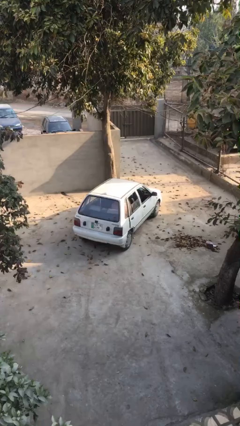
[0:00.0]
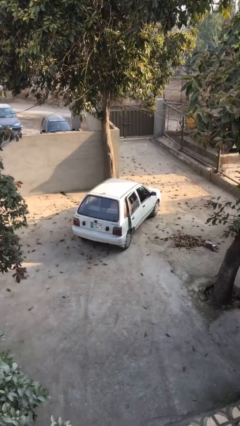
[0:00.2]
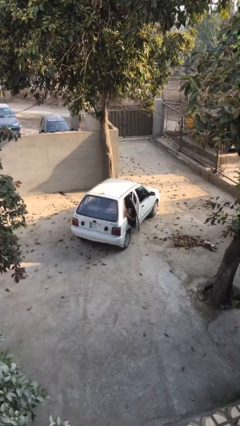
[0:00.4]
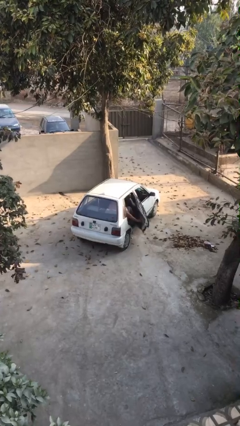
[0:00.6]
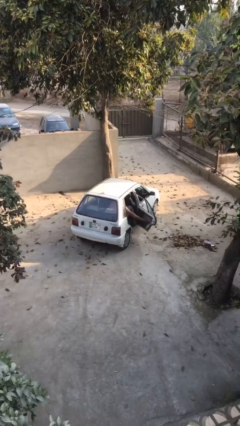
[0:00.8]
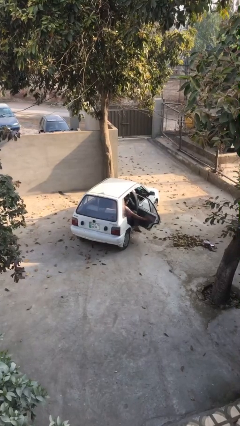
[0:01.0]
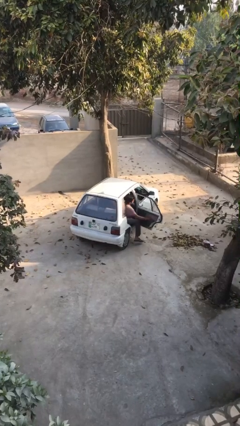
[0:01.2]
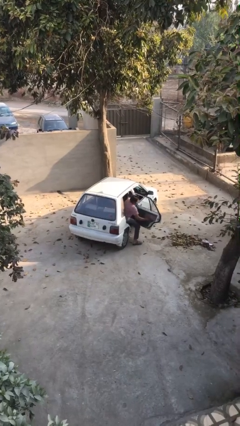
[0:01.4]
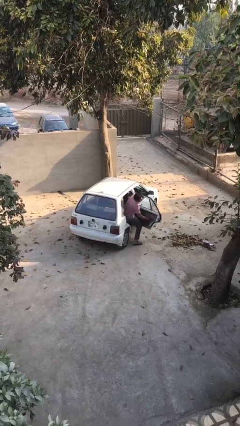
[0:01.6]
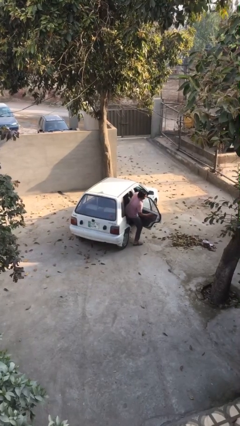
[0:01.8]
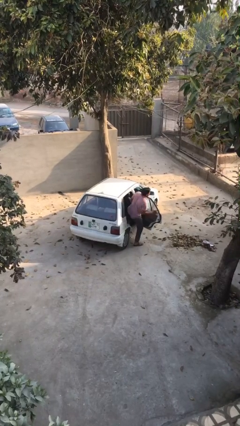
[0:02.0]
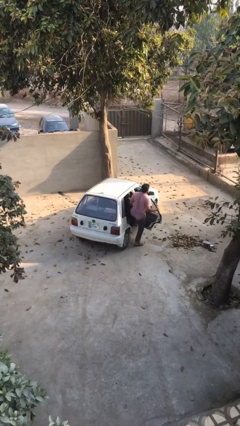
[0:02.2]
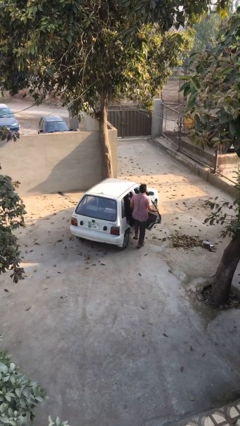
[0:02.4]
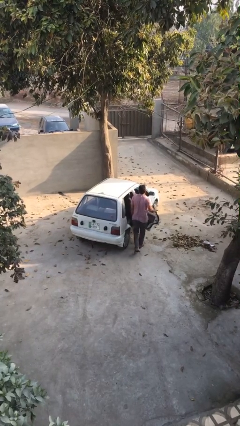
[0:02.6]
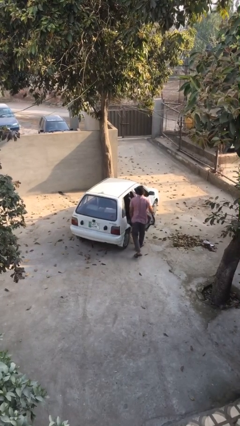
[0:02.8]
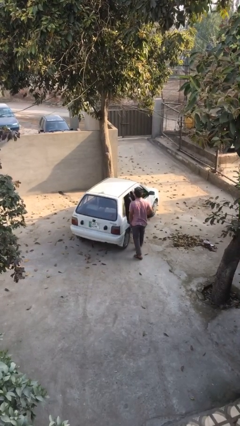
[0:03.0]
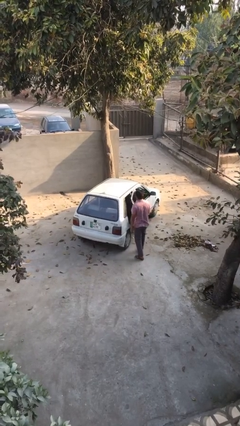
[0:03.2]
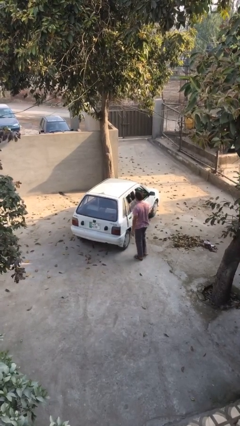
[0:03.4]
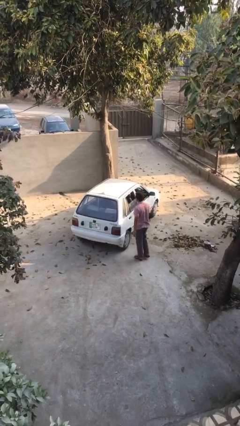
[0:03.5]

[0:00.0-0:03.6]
car drops off person

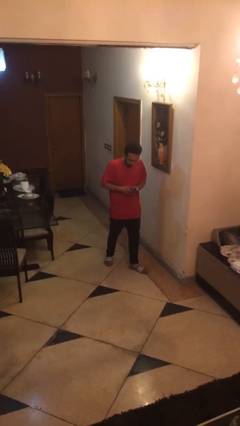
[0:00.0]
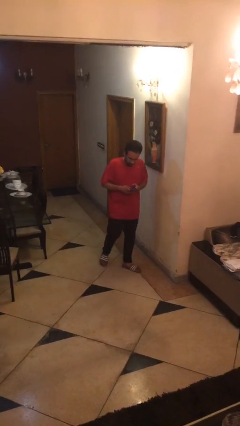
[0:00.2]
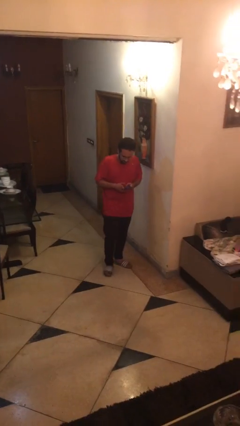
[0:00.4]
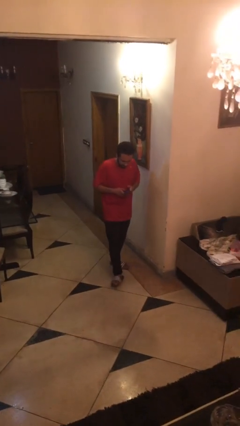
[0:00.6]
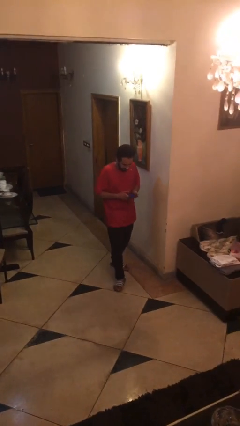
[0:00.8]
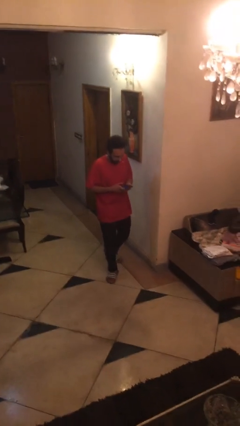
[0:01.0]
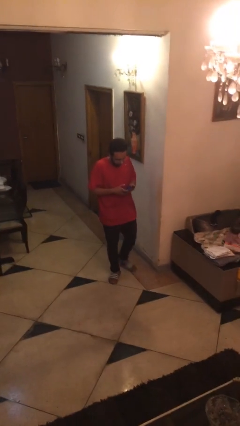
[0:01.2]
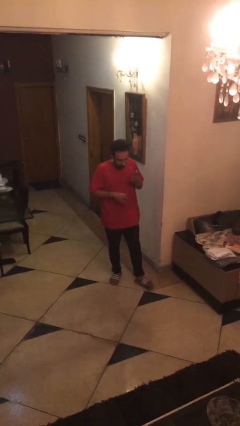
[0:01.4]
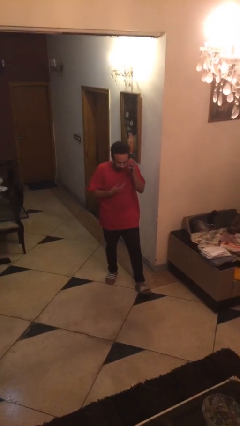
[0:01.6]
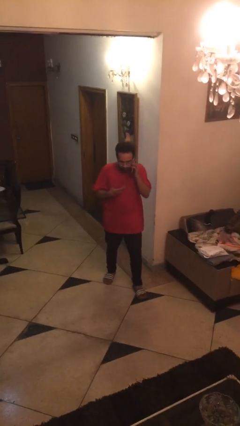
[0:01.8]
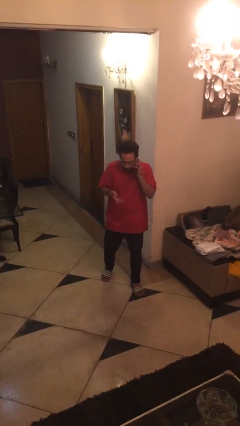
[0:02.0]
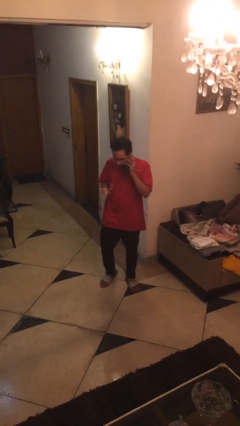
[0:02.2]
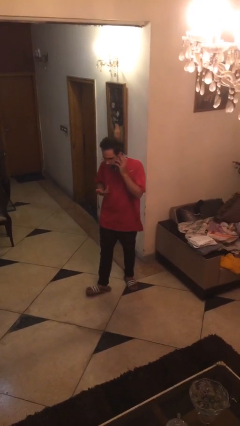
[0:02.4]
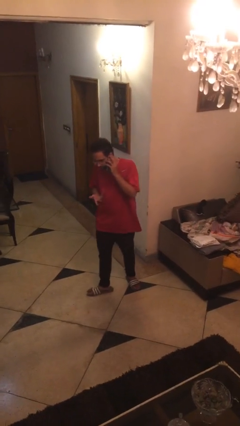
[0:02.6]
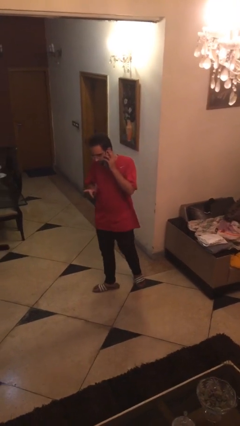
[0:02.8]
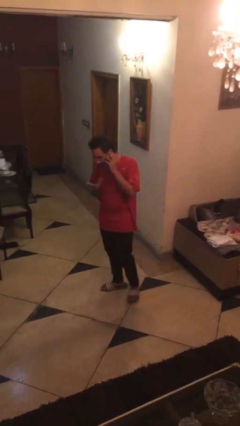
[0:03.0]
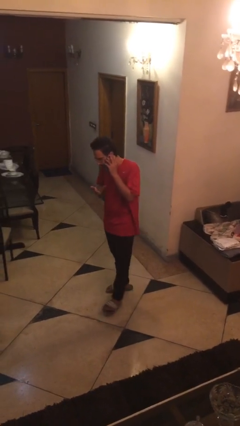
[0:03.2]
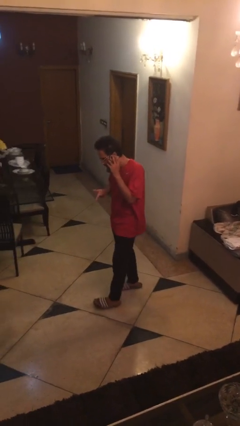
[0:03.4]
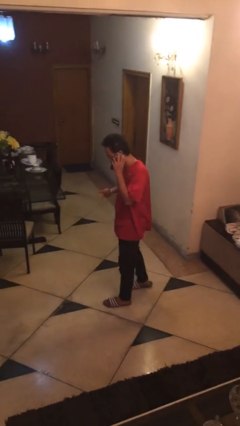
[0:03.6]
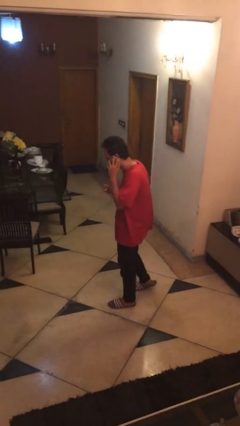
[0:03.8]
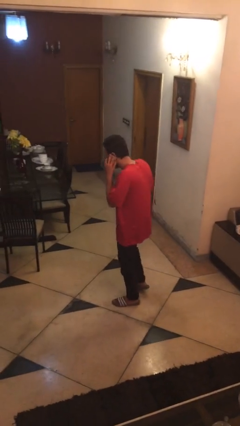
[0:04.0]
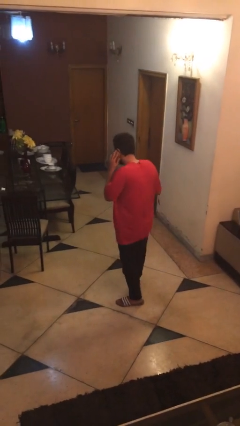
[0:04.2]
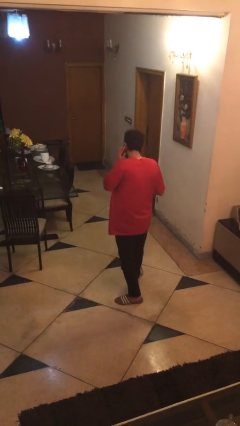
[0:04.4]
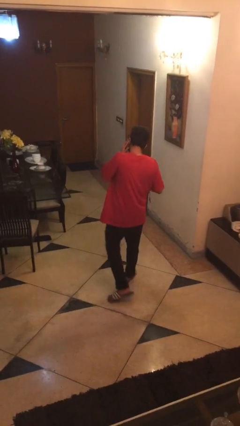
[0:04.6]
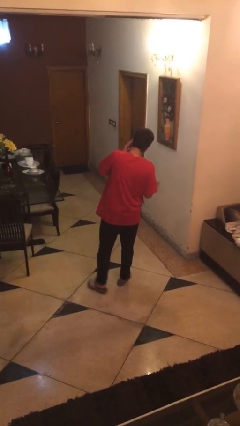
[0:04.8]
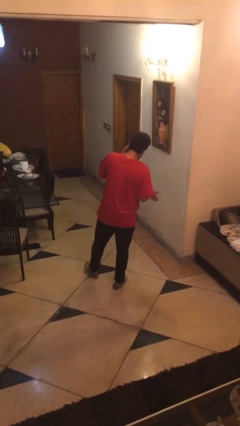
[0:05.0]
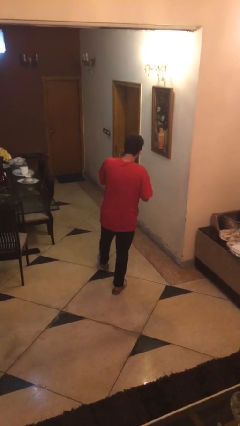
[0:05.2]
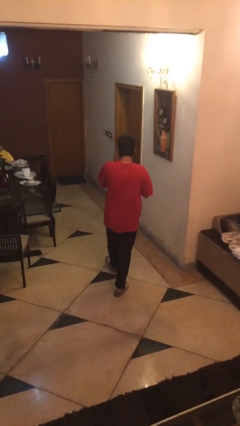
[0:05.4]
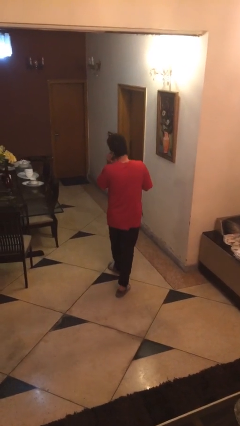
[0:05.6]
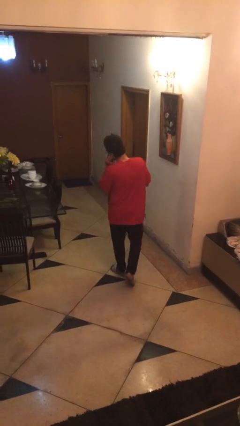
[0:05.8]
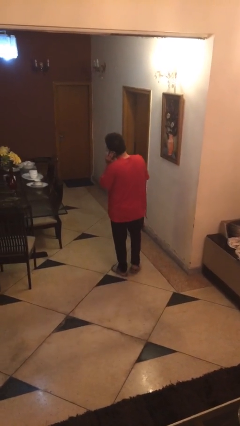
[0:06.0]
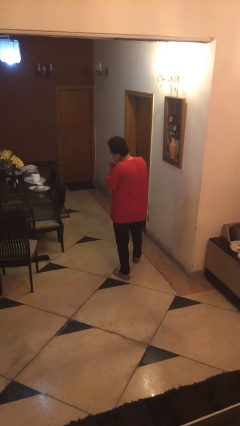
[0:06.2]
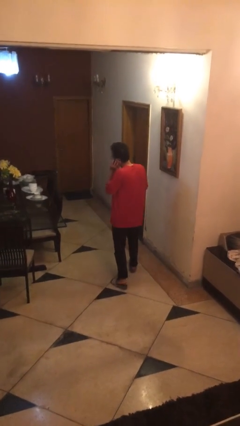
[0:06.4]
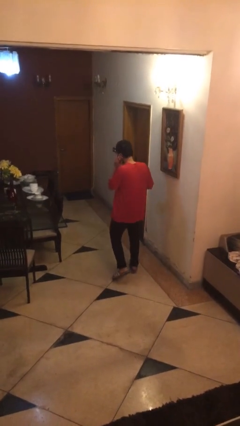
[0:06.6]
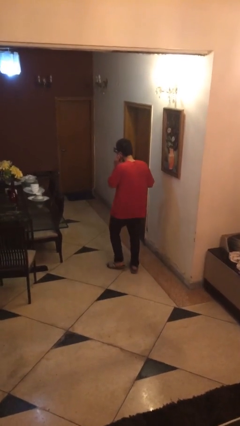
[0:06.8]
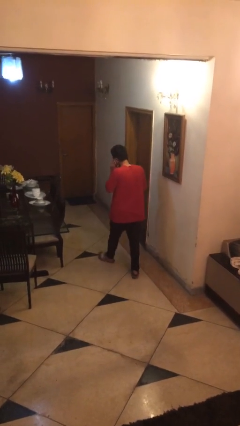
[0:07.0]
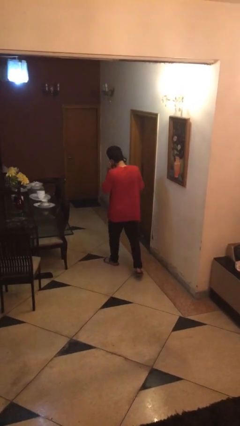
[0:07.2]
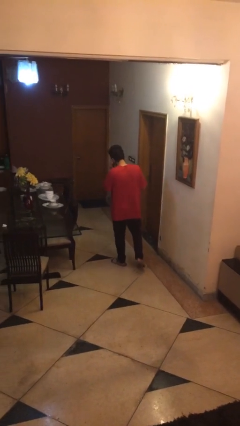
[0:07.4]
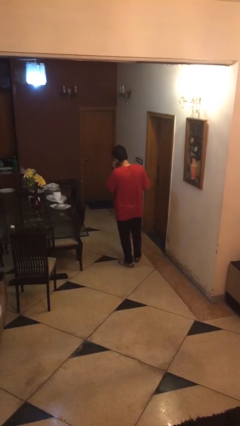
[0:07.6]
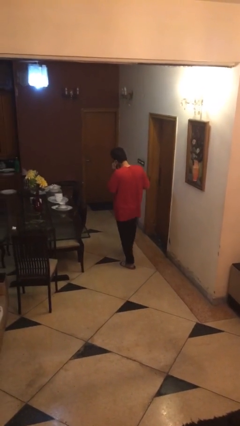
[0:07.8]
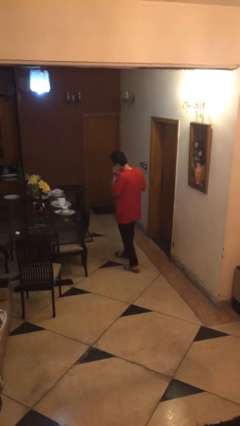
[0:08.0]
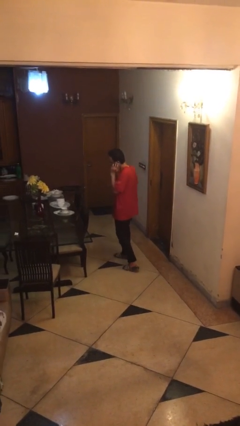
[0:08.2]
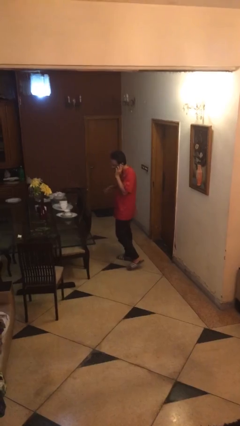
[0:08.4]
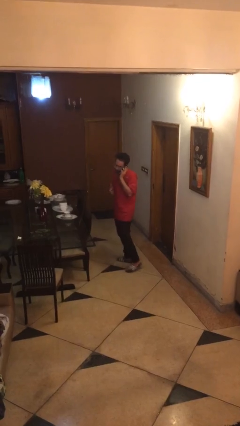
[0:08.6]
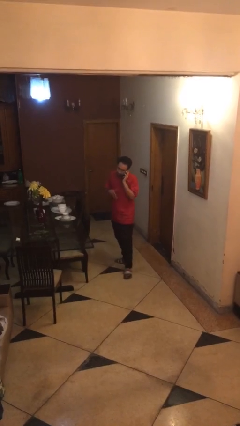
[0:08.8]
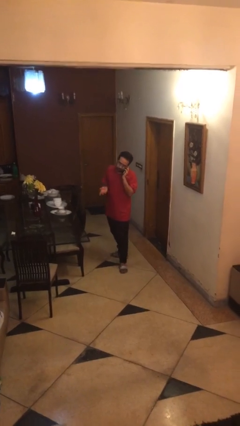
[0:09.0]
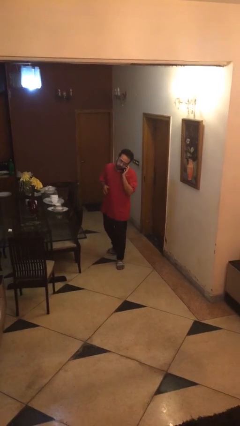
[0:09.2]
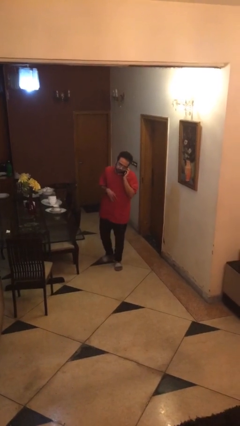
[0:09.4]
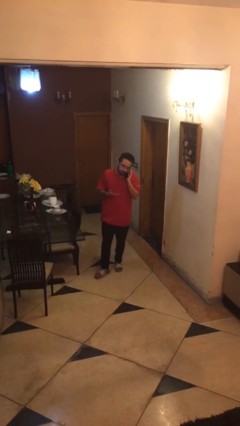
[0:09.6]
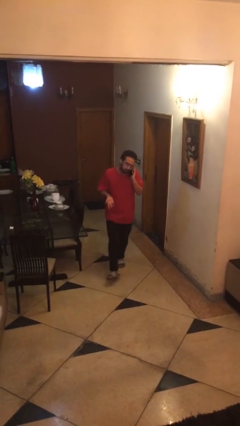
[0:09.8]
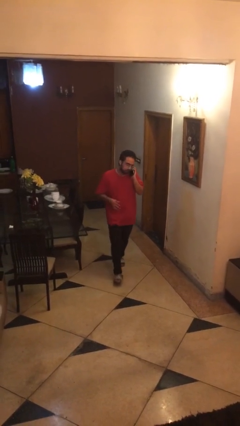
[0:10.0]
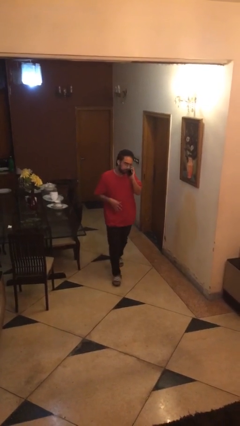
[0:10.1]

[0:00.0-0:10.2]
person talks on phone

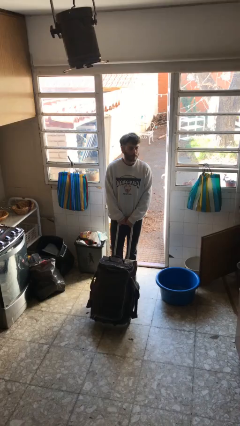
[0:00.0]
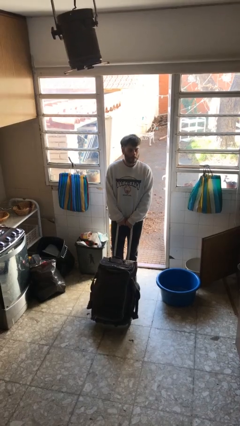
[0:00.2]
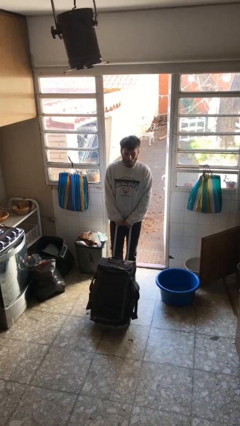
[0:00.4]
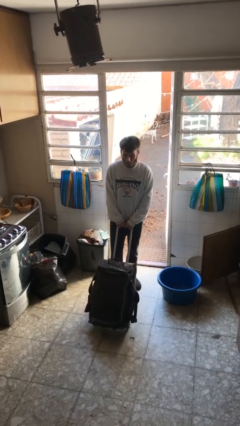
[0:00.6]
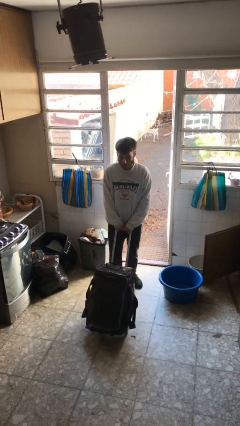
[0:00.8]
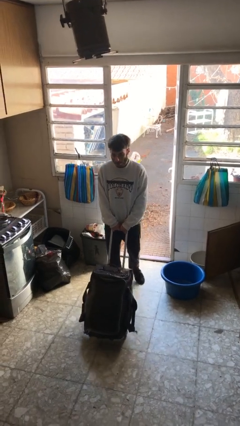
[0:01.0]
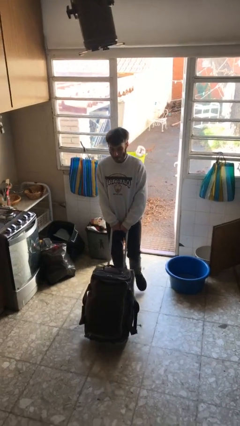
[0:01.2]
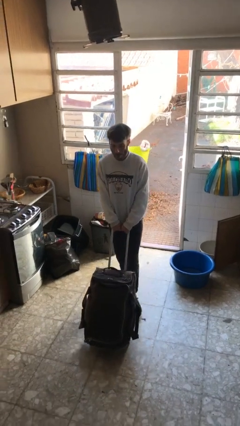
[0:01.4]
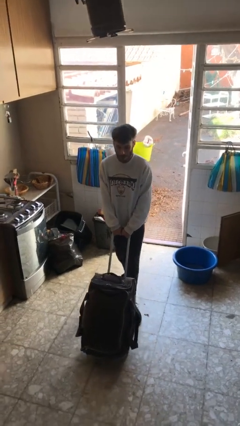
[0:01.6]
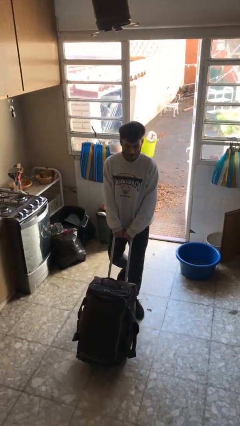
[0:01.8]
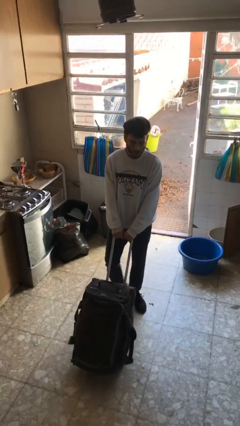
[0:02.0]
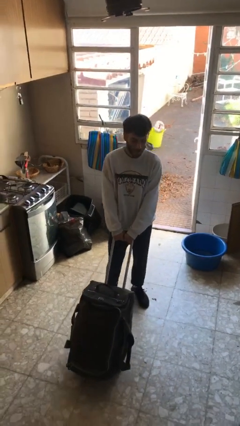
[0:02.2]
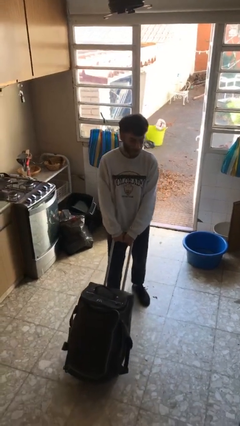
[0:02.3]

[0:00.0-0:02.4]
person pushes wheeled cart

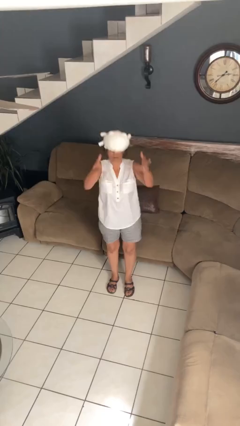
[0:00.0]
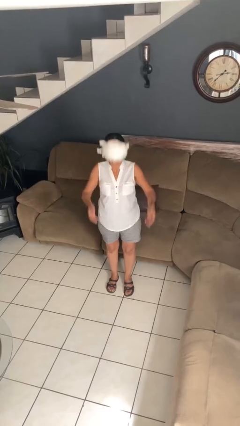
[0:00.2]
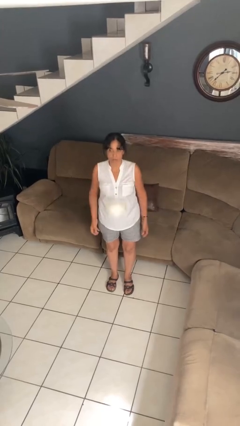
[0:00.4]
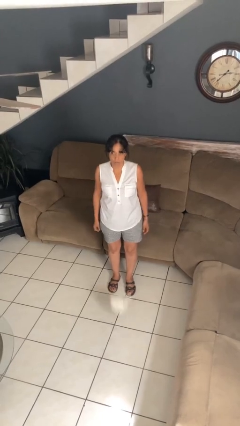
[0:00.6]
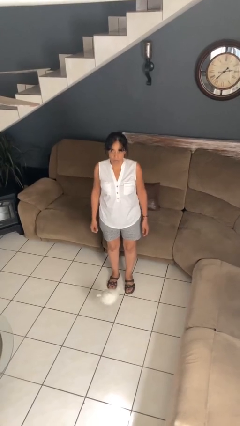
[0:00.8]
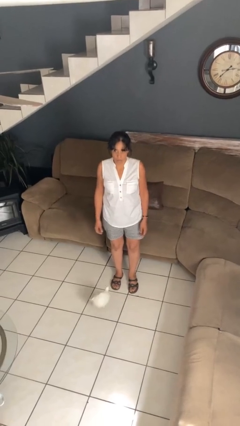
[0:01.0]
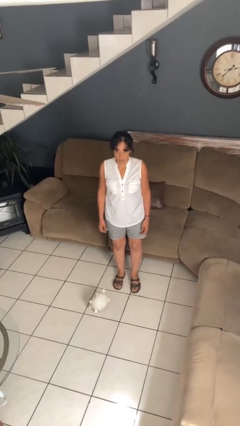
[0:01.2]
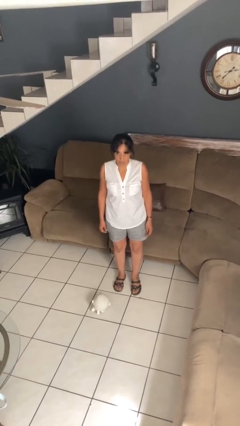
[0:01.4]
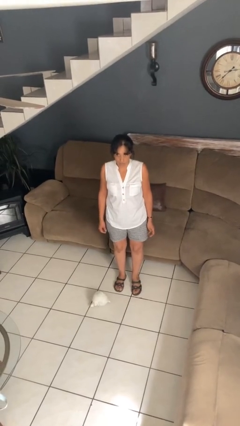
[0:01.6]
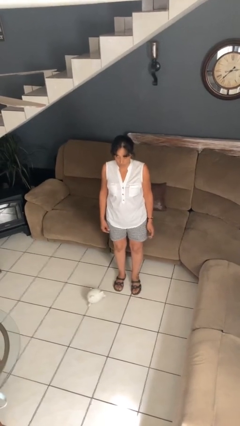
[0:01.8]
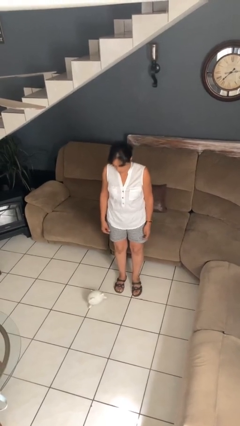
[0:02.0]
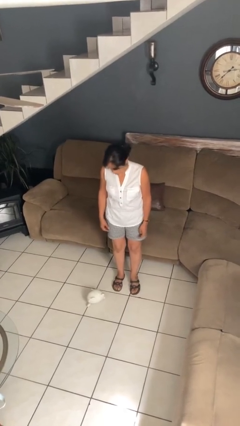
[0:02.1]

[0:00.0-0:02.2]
person throws object into air
